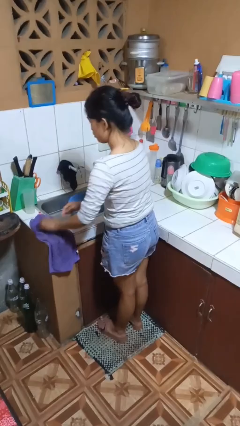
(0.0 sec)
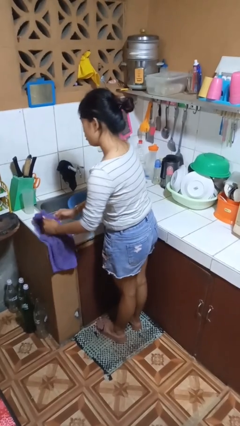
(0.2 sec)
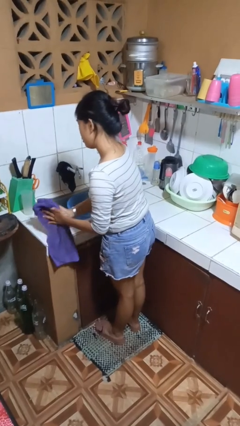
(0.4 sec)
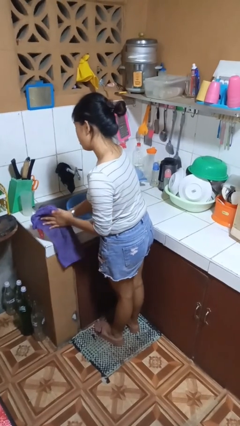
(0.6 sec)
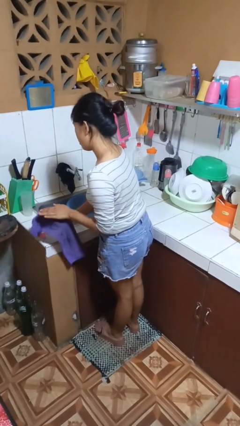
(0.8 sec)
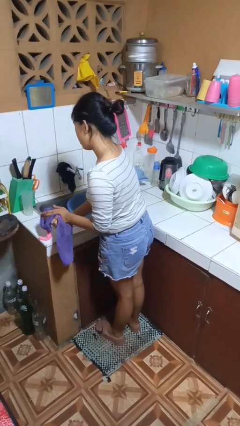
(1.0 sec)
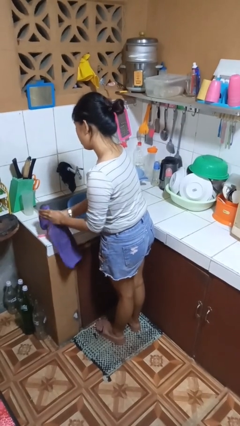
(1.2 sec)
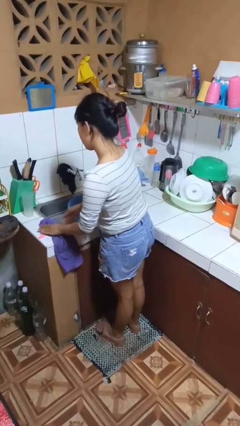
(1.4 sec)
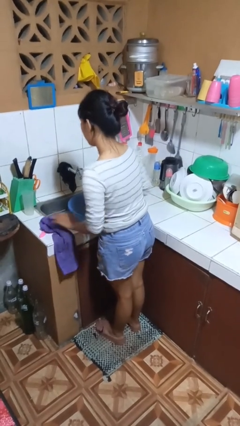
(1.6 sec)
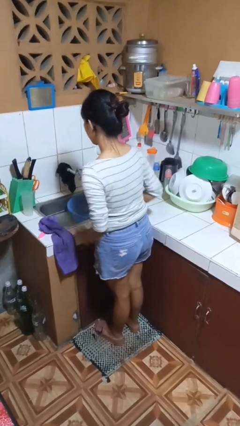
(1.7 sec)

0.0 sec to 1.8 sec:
person dries hands with towel

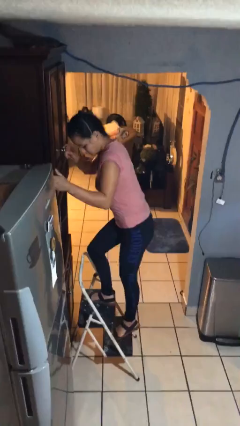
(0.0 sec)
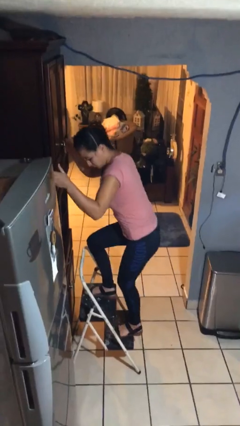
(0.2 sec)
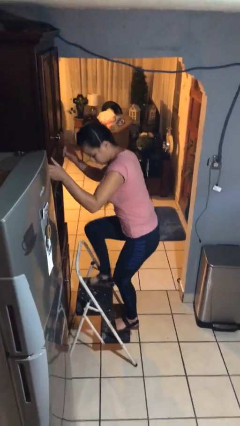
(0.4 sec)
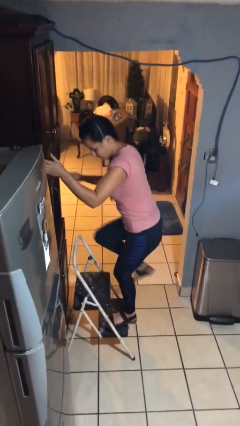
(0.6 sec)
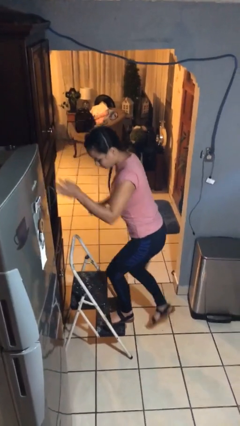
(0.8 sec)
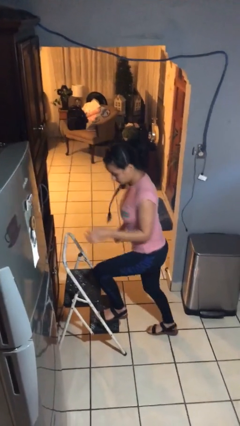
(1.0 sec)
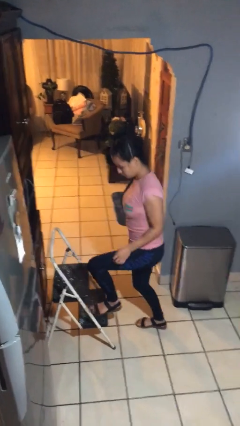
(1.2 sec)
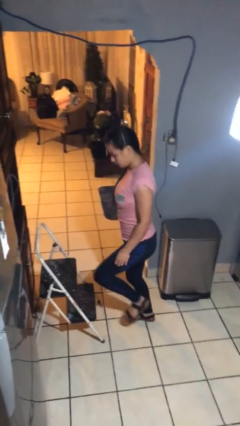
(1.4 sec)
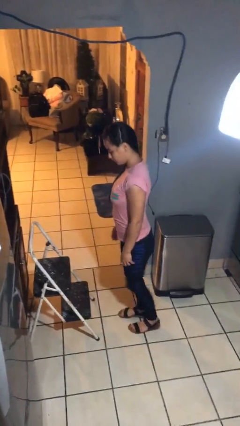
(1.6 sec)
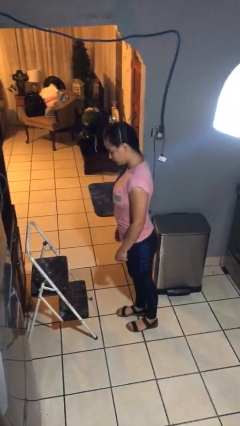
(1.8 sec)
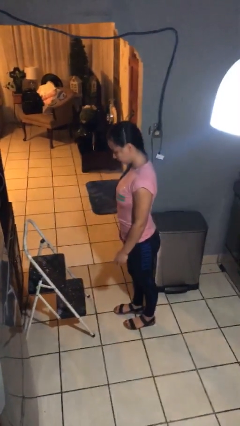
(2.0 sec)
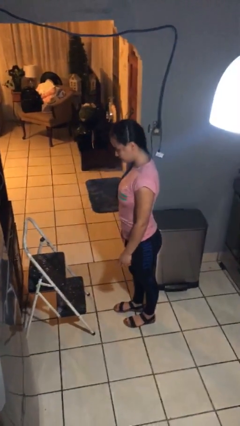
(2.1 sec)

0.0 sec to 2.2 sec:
person climbs down ladder

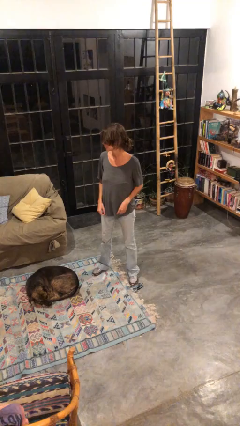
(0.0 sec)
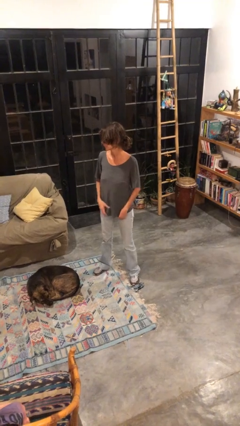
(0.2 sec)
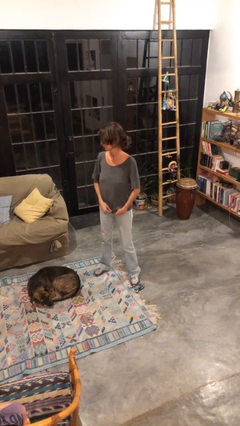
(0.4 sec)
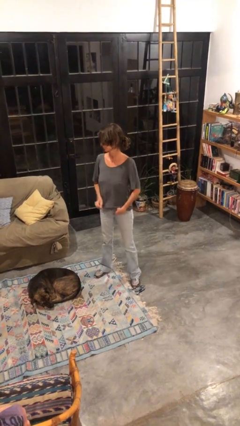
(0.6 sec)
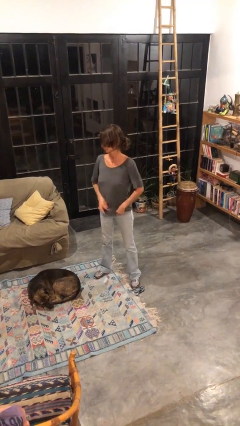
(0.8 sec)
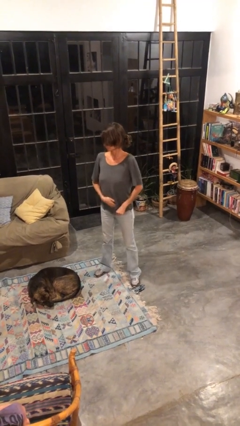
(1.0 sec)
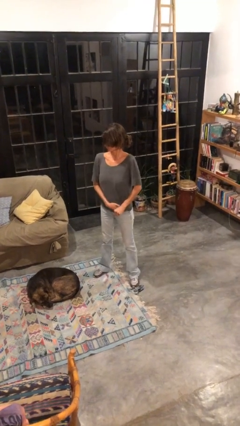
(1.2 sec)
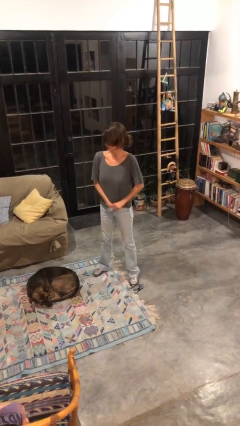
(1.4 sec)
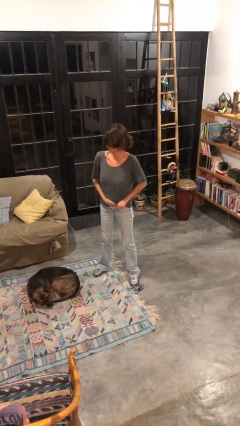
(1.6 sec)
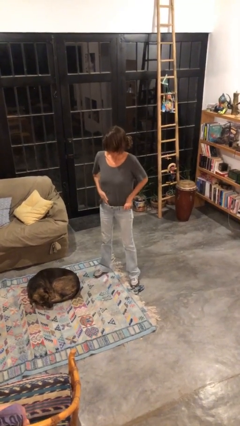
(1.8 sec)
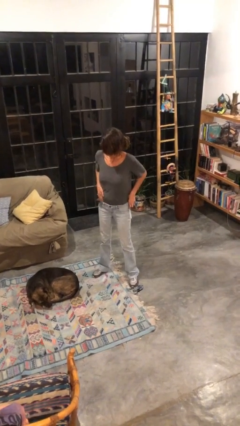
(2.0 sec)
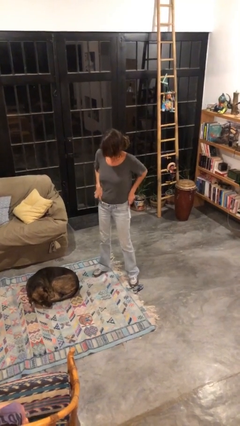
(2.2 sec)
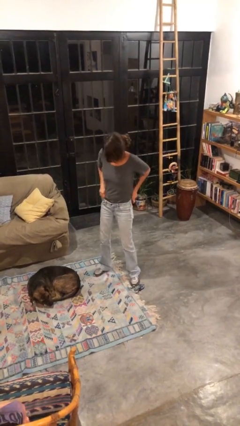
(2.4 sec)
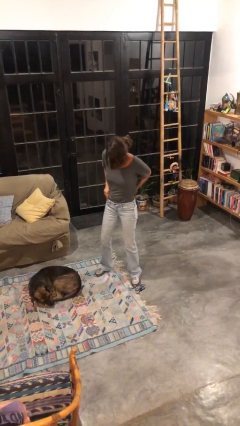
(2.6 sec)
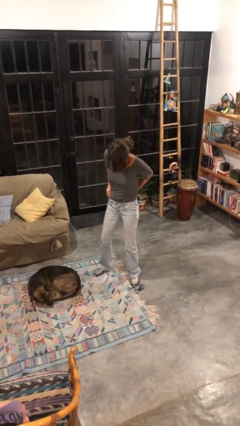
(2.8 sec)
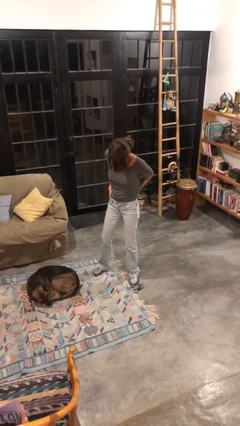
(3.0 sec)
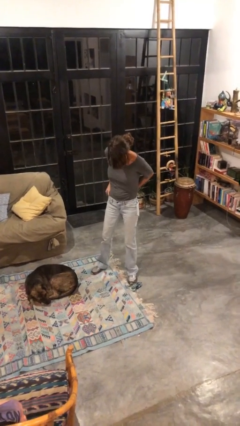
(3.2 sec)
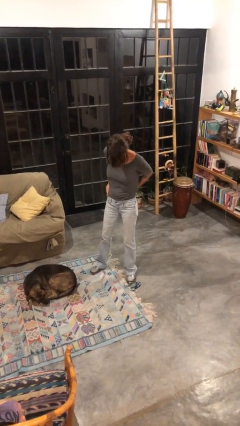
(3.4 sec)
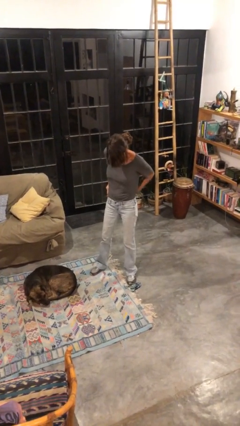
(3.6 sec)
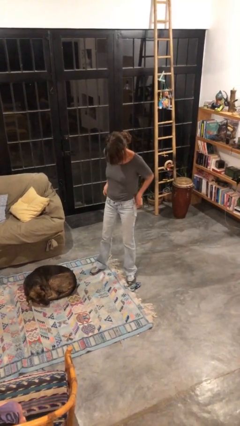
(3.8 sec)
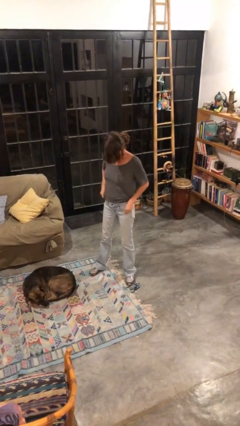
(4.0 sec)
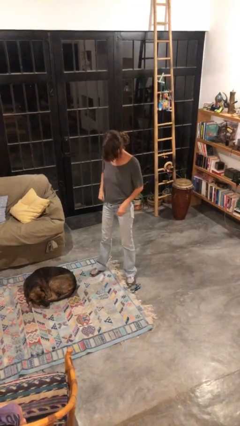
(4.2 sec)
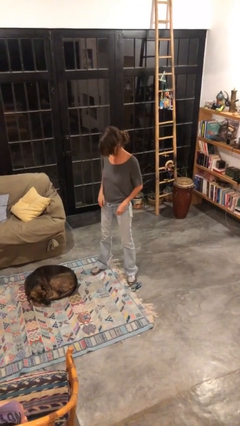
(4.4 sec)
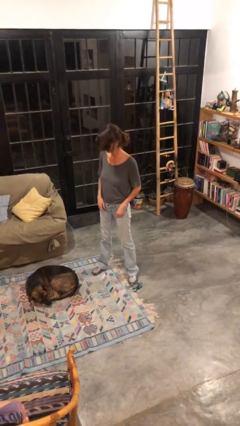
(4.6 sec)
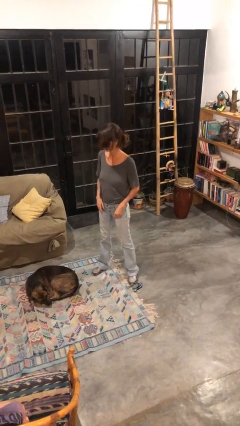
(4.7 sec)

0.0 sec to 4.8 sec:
person tucks in shirt

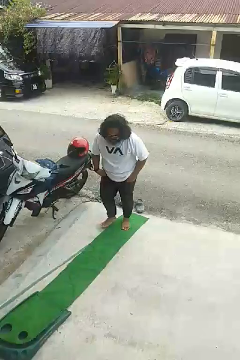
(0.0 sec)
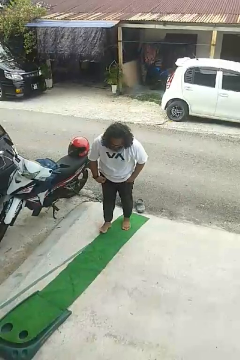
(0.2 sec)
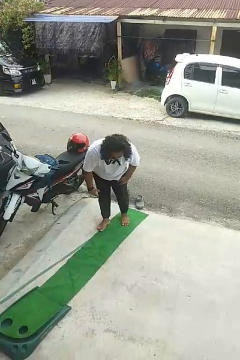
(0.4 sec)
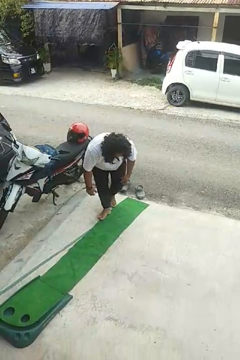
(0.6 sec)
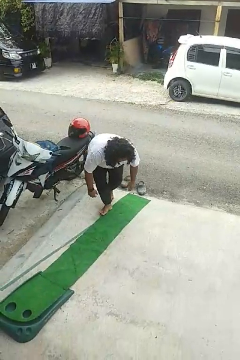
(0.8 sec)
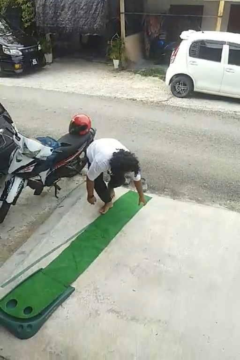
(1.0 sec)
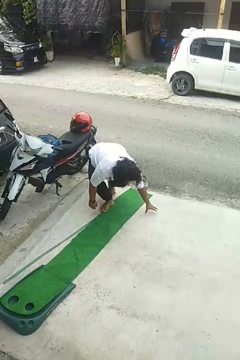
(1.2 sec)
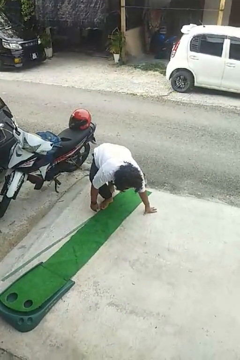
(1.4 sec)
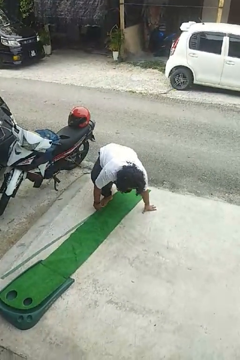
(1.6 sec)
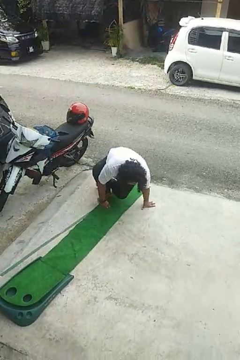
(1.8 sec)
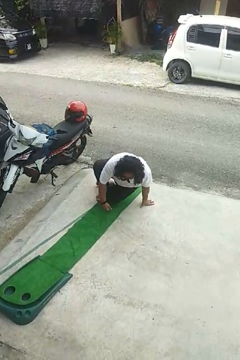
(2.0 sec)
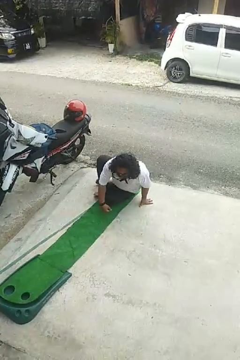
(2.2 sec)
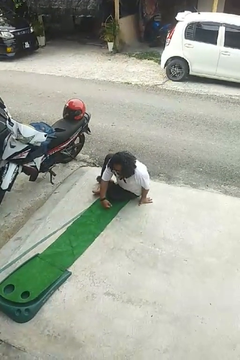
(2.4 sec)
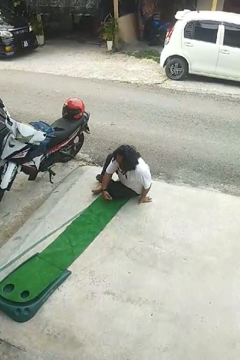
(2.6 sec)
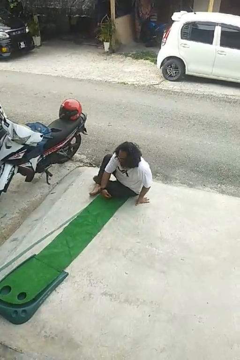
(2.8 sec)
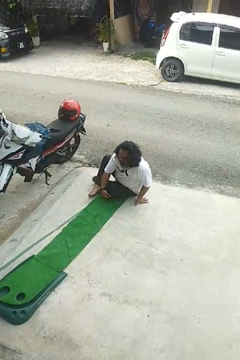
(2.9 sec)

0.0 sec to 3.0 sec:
person sits crisscross

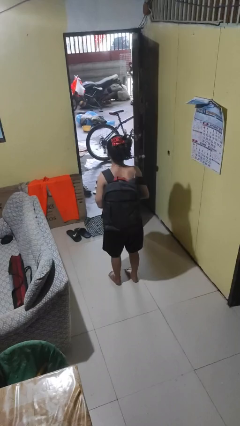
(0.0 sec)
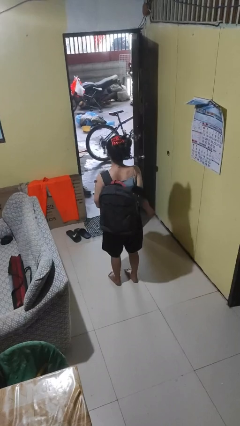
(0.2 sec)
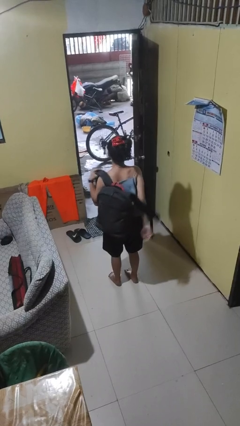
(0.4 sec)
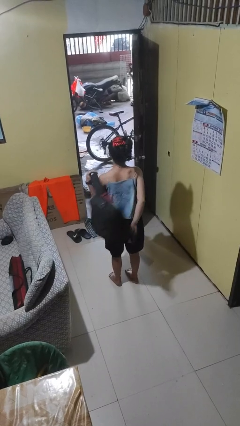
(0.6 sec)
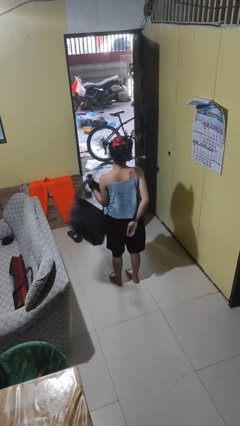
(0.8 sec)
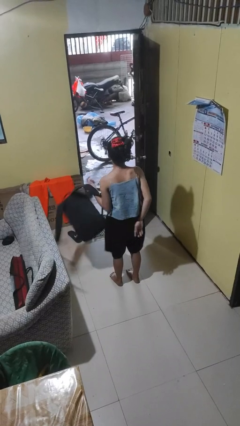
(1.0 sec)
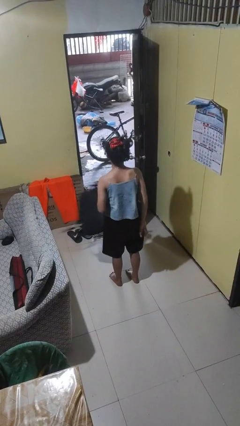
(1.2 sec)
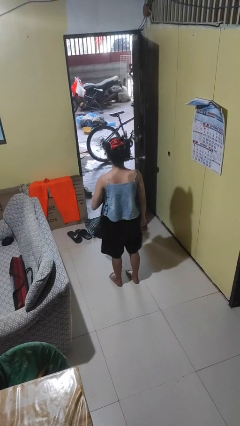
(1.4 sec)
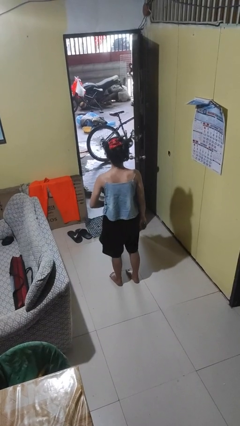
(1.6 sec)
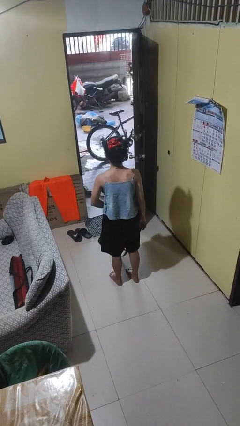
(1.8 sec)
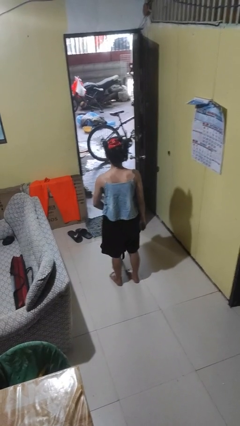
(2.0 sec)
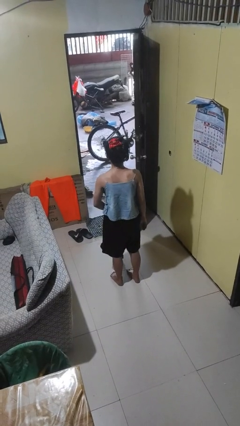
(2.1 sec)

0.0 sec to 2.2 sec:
person takes off backpack

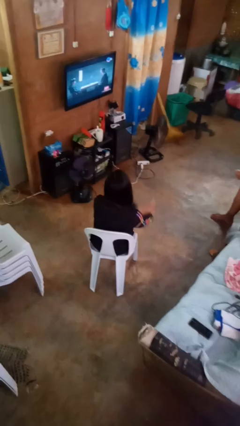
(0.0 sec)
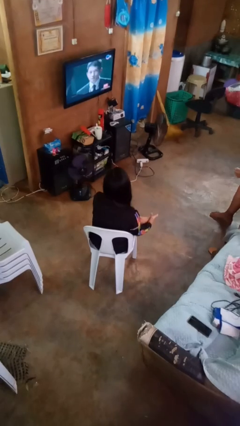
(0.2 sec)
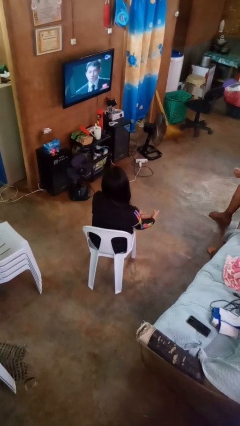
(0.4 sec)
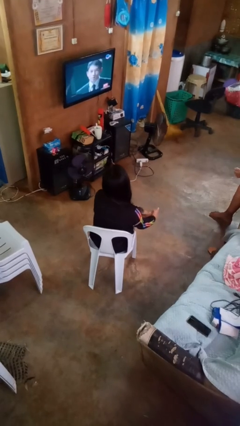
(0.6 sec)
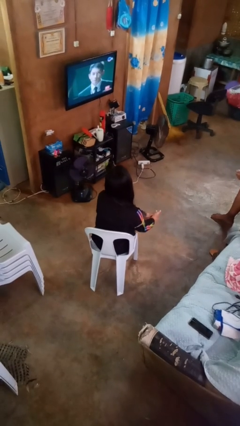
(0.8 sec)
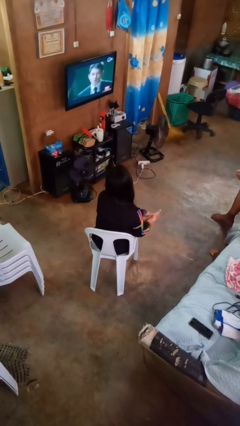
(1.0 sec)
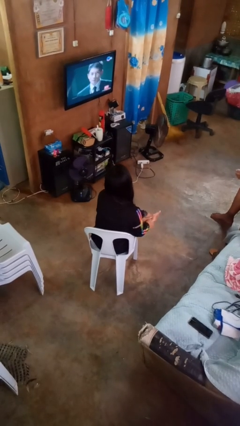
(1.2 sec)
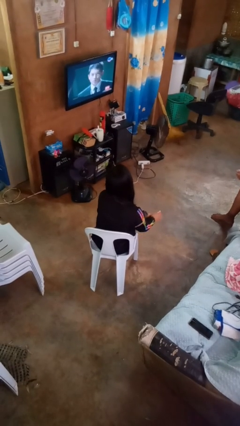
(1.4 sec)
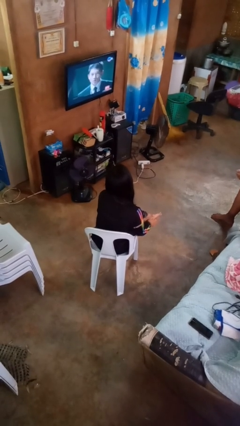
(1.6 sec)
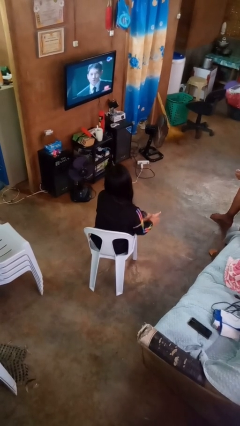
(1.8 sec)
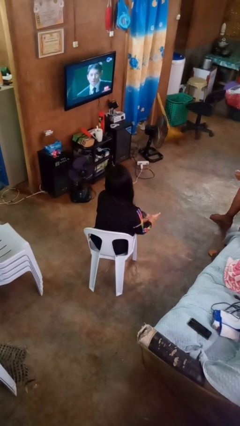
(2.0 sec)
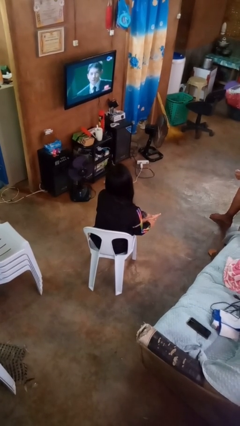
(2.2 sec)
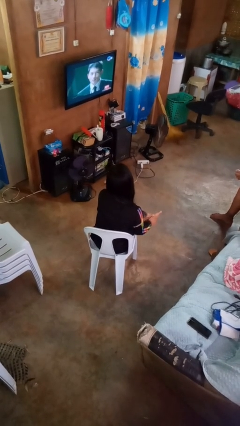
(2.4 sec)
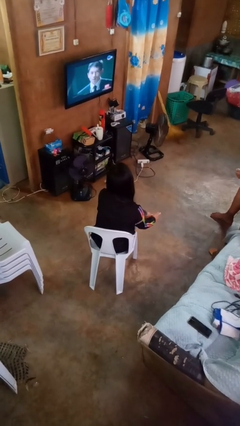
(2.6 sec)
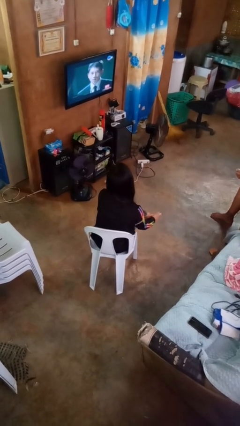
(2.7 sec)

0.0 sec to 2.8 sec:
person rubs foot

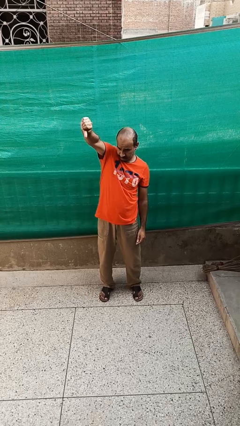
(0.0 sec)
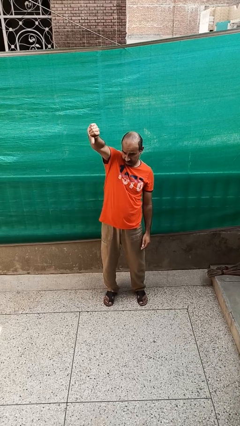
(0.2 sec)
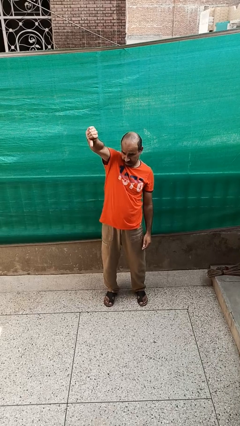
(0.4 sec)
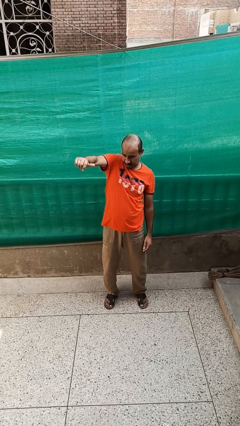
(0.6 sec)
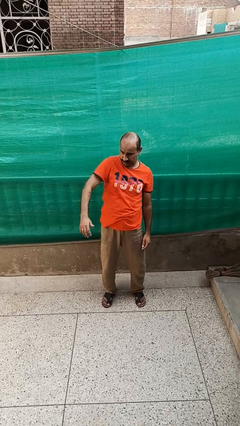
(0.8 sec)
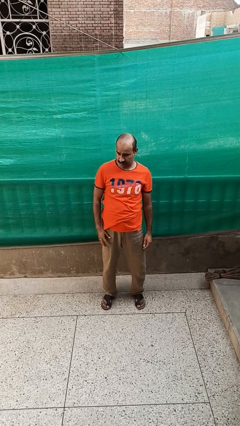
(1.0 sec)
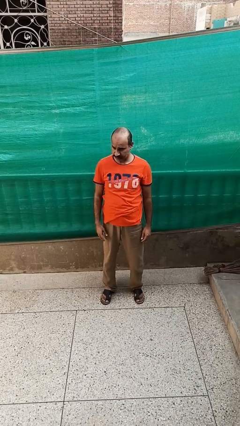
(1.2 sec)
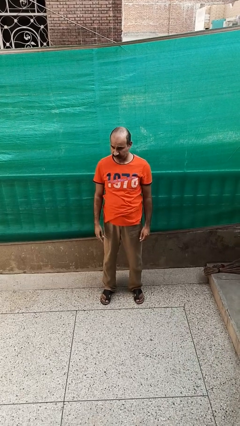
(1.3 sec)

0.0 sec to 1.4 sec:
person gestures thumbs down
